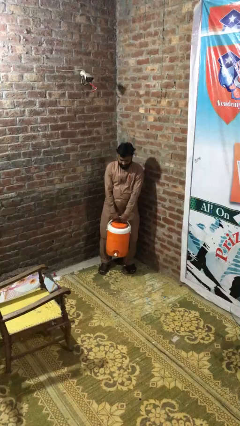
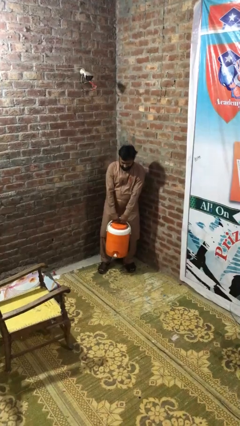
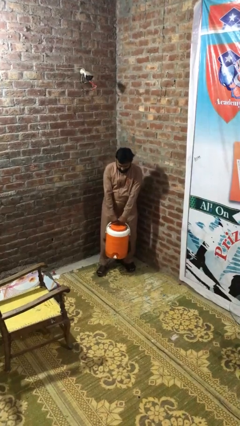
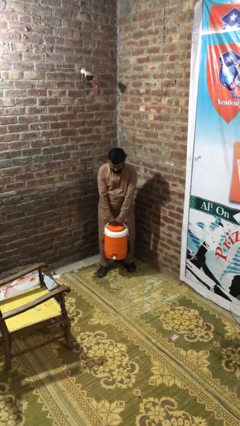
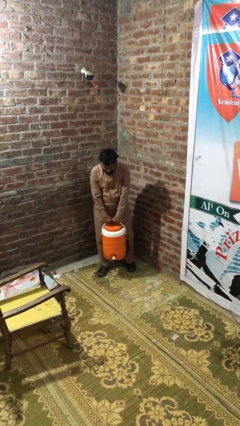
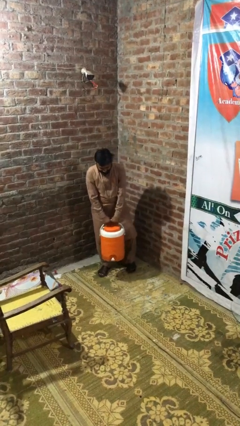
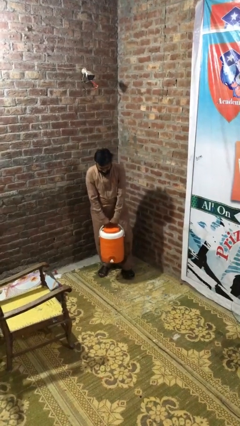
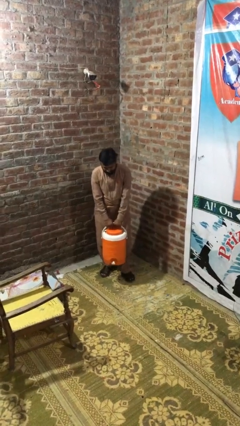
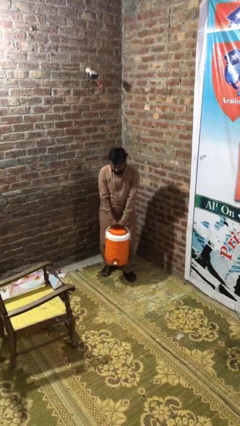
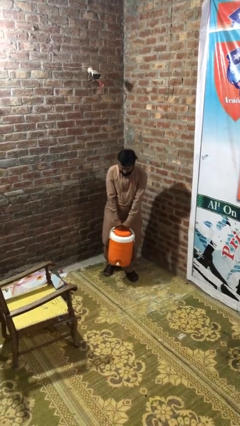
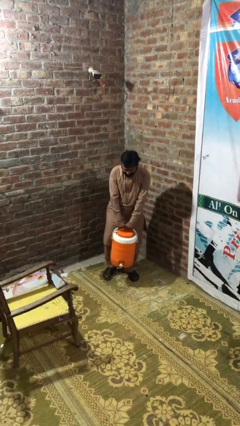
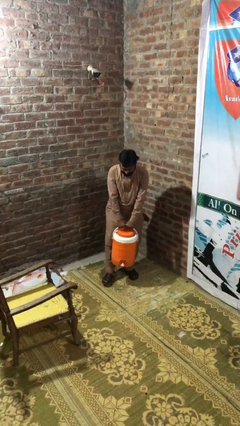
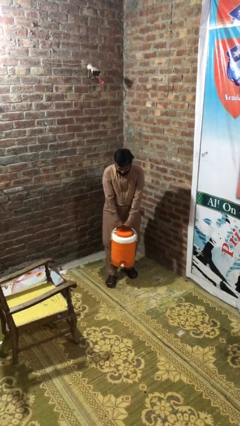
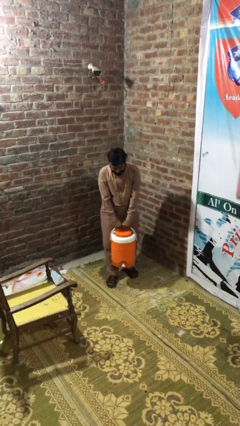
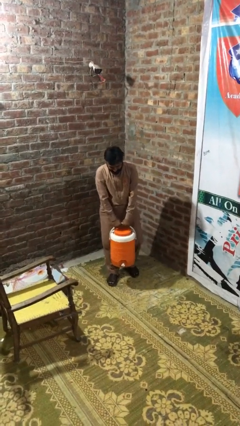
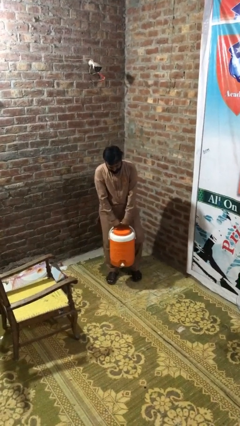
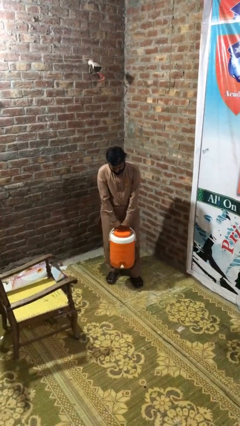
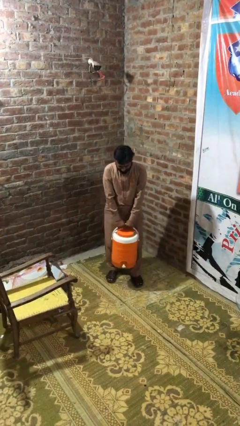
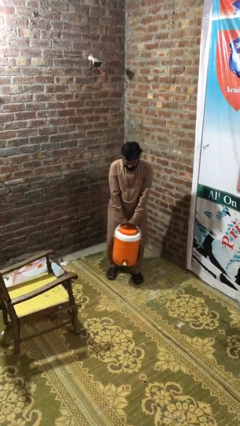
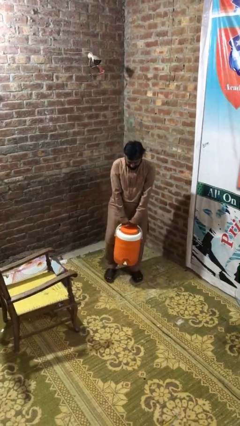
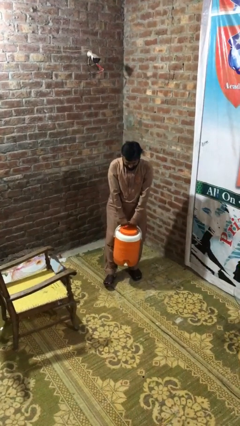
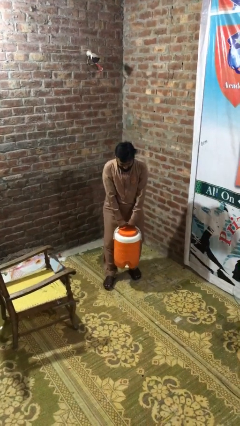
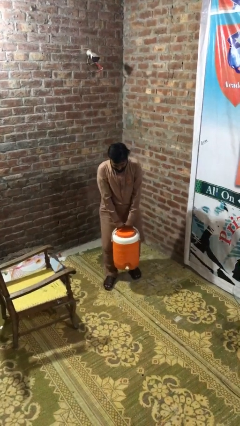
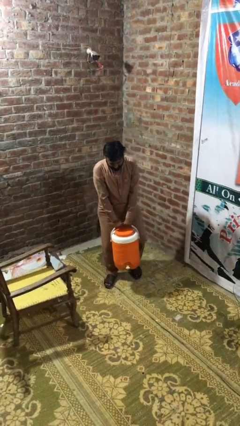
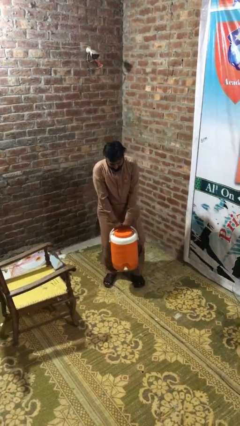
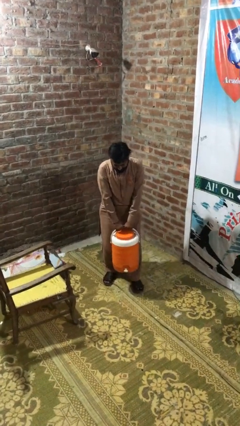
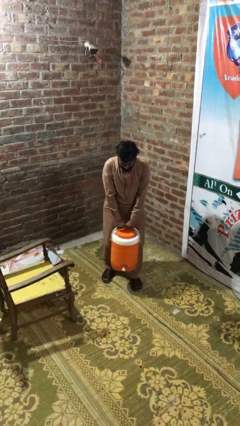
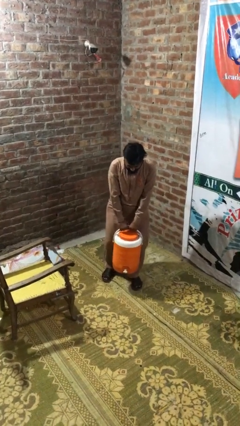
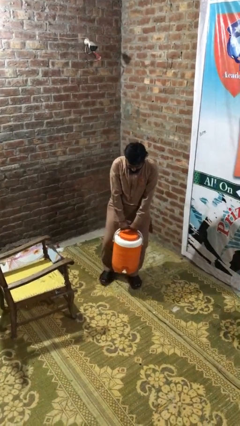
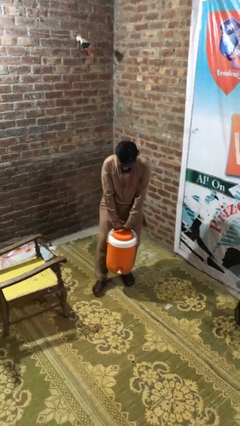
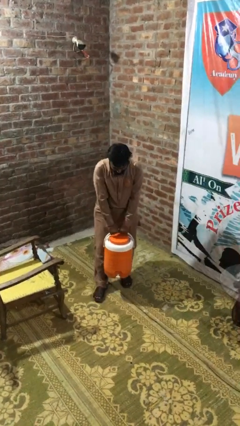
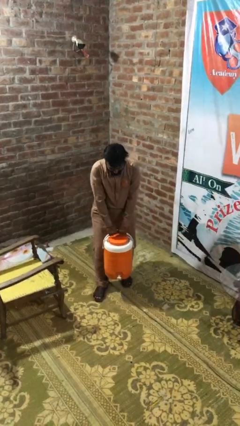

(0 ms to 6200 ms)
person carries heavy object

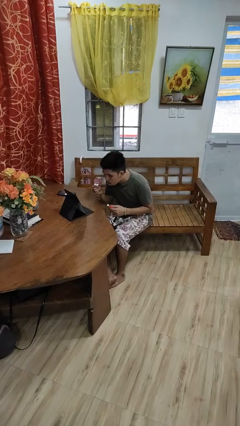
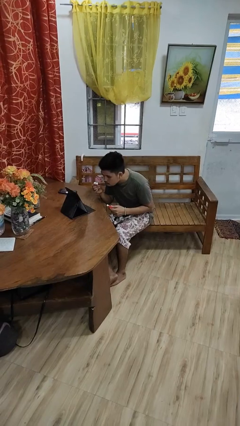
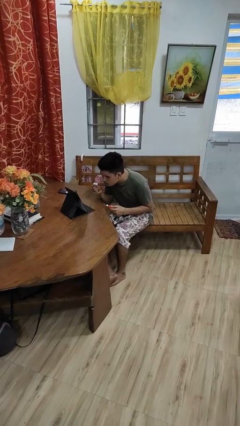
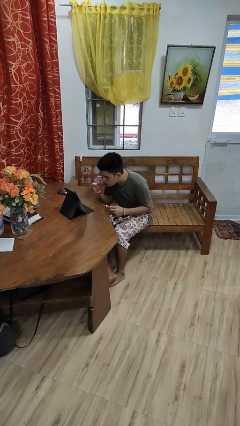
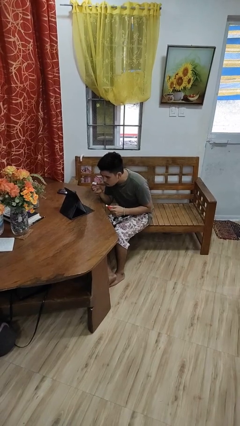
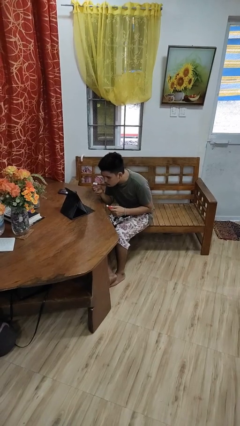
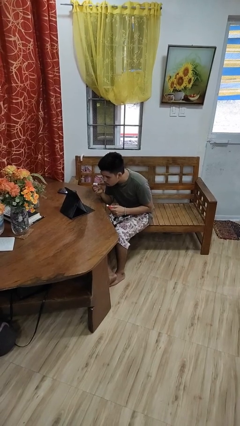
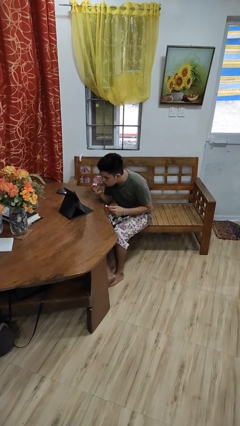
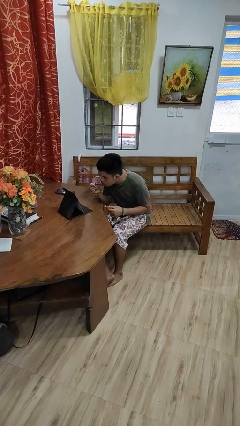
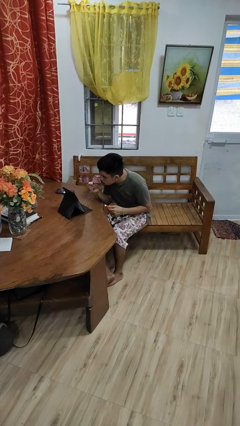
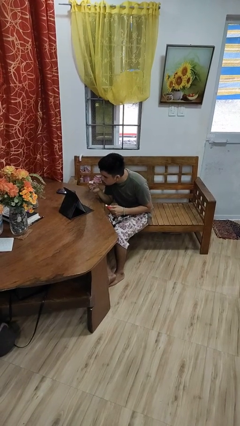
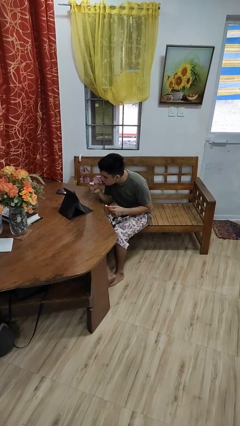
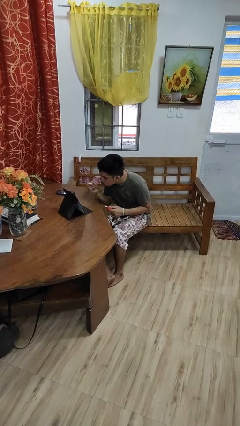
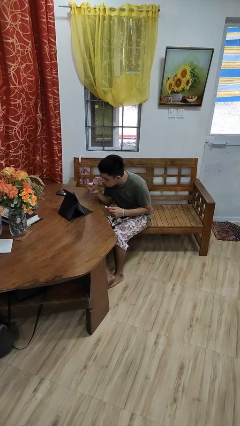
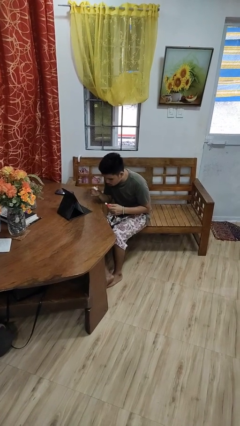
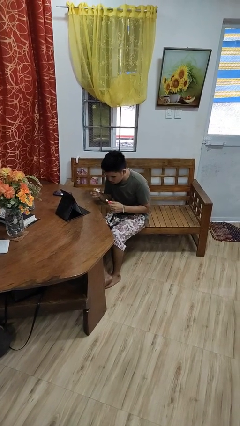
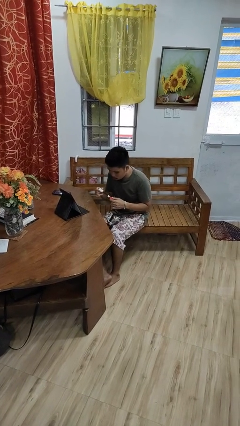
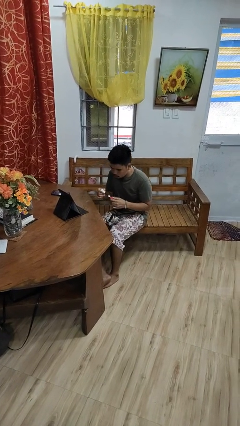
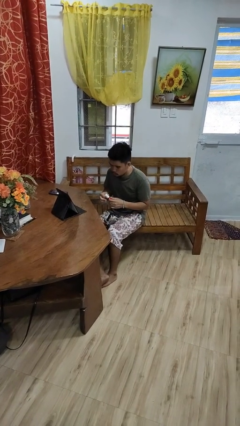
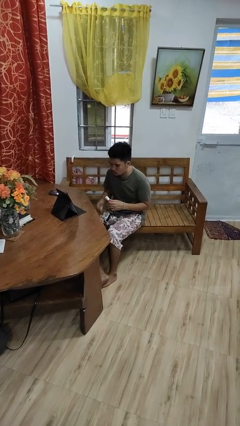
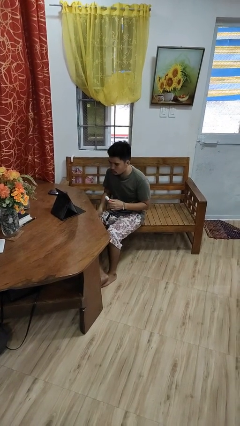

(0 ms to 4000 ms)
person applies lip makeup

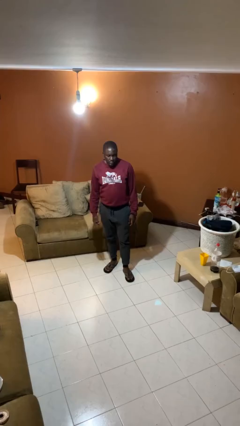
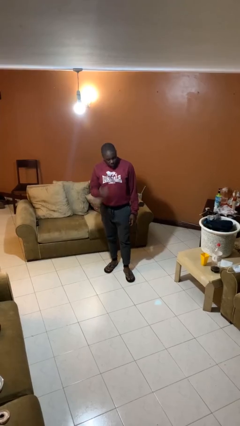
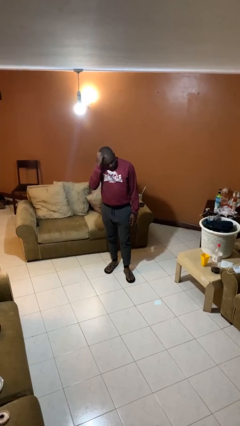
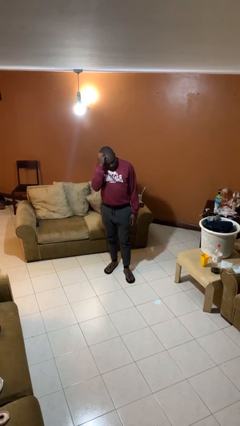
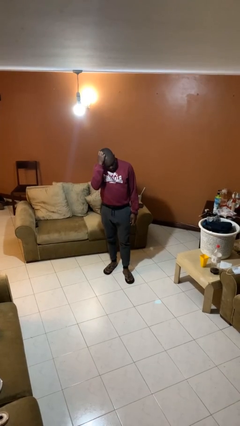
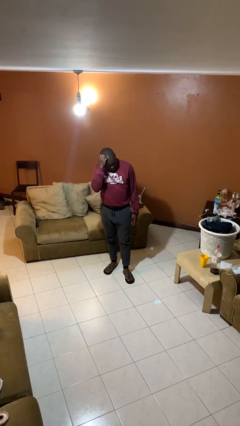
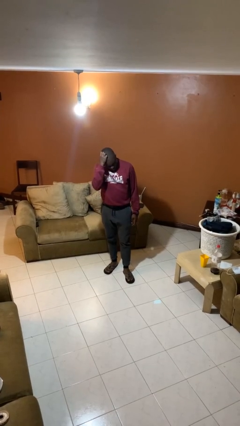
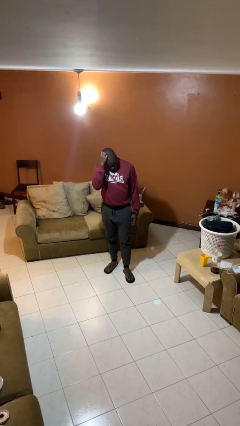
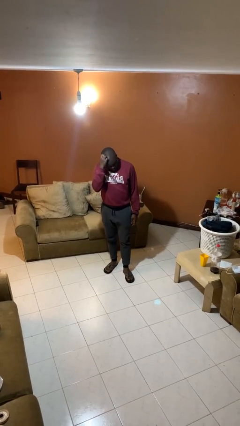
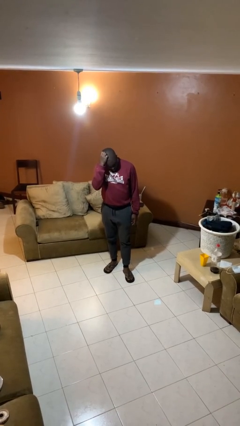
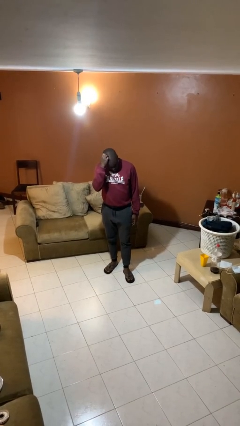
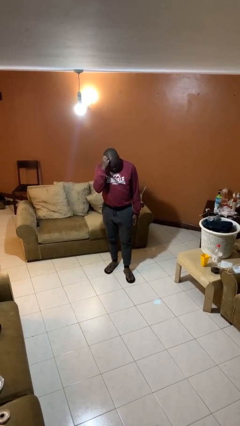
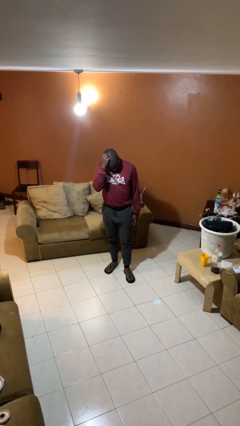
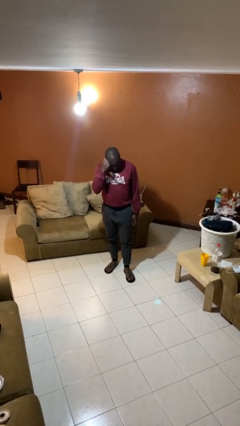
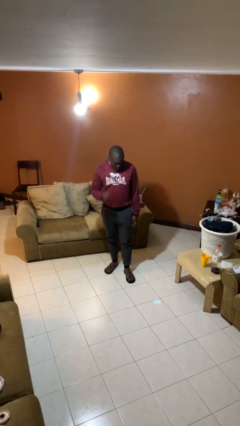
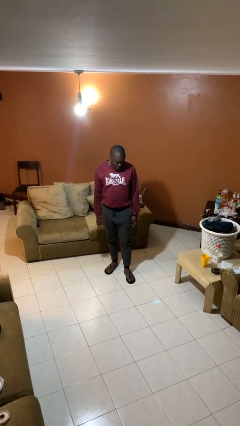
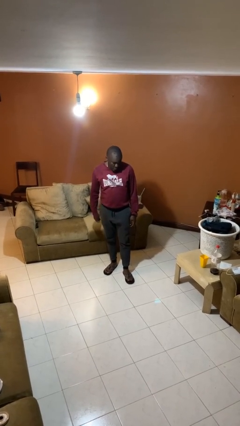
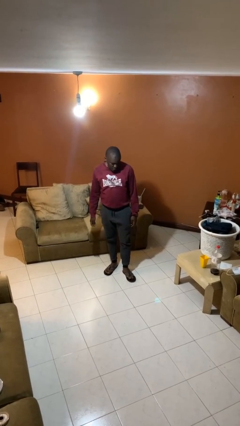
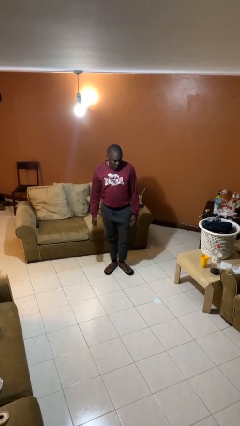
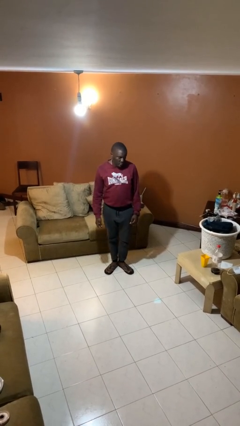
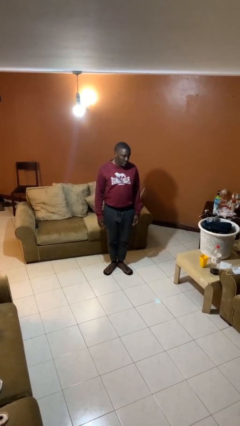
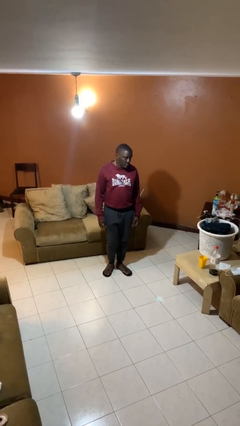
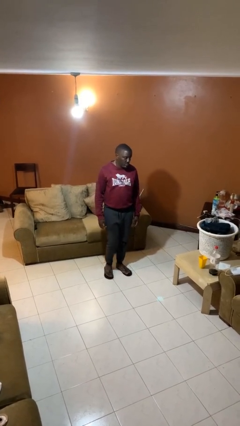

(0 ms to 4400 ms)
person scratches face

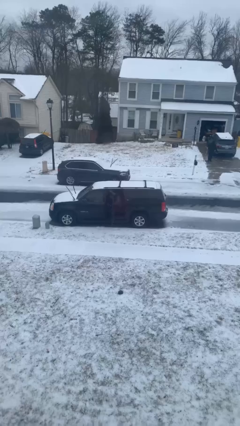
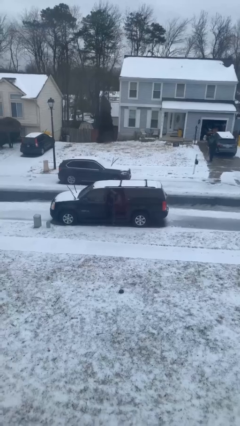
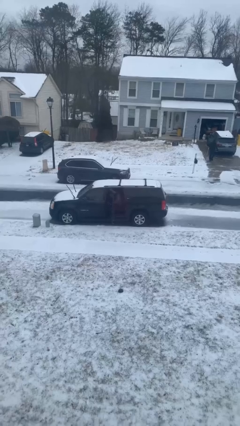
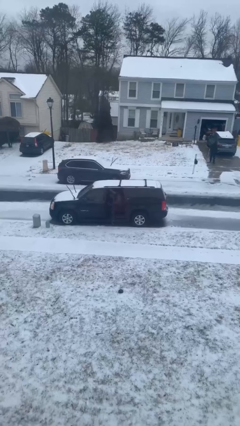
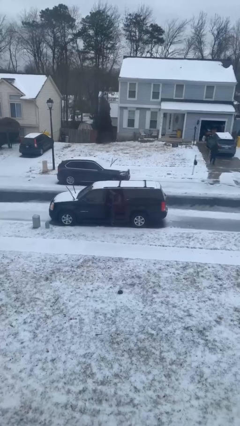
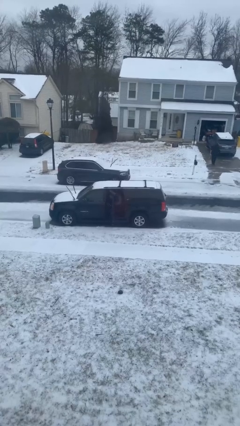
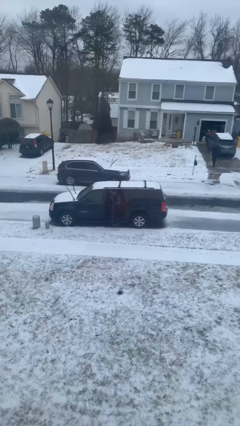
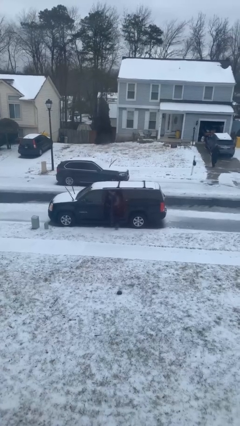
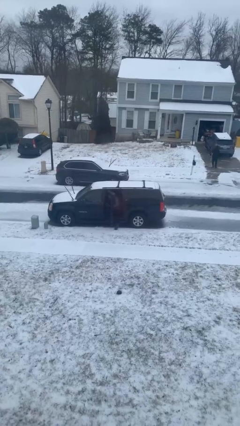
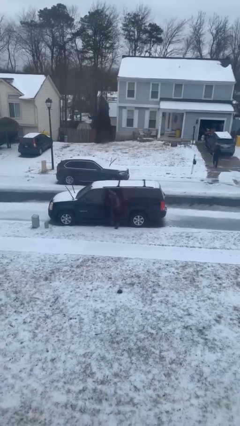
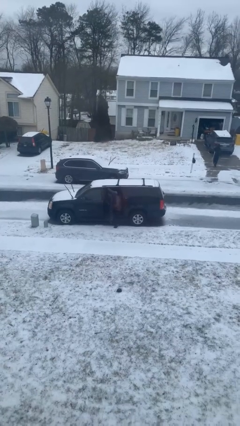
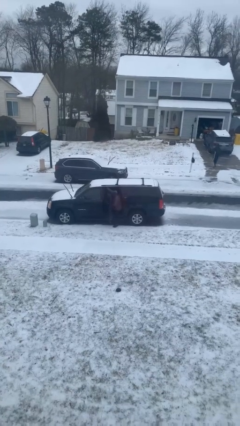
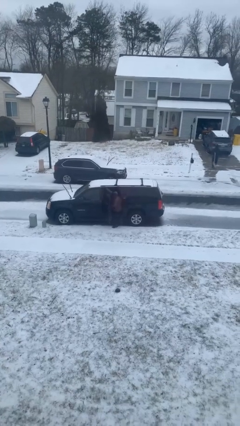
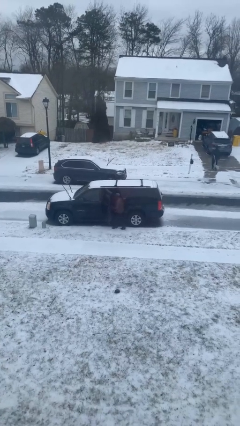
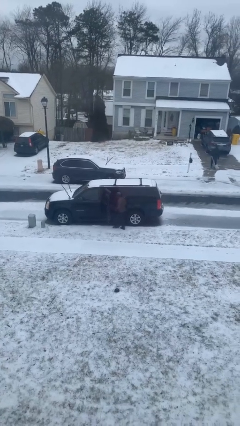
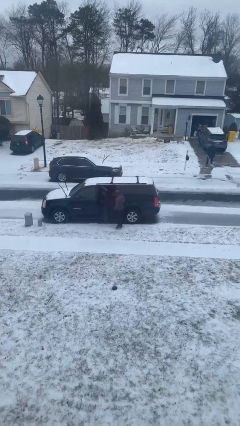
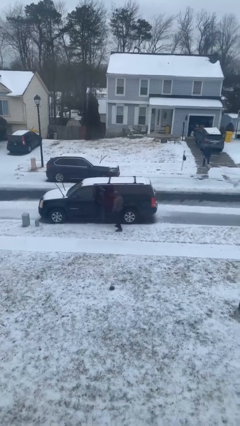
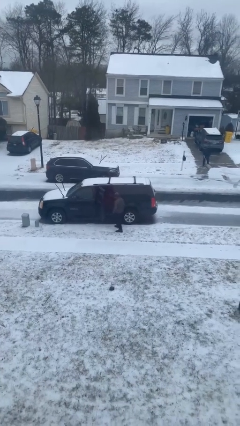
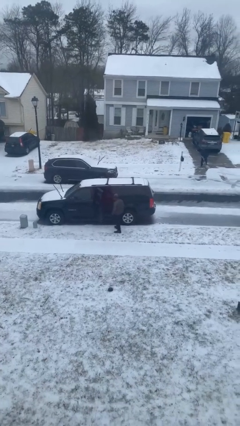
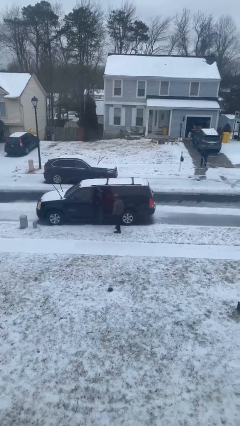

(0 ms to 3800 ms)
person exits car
